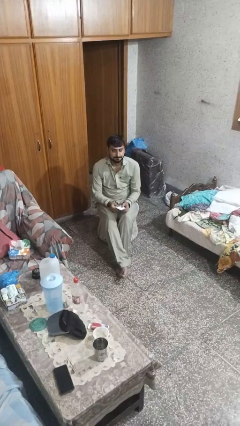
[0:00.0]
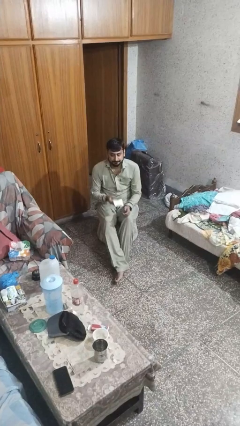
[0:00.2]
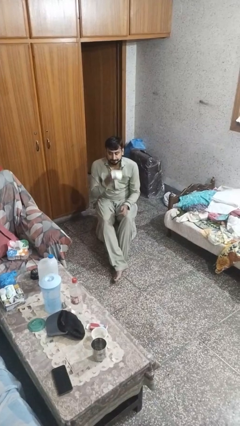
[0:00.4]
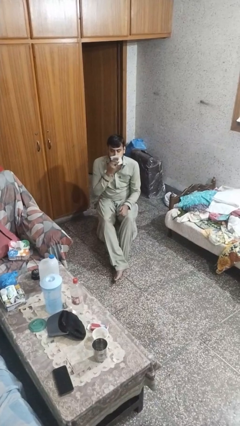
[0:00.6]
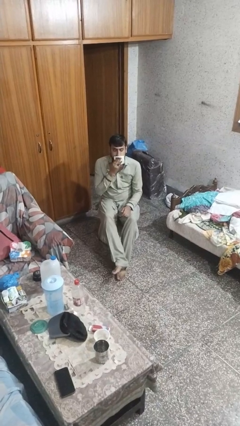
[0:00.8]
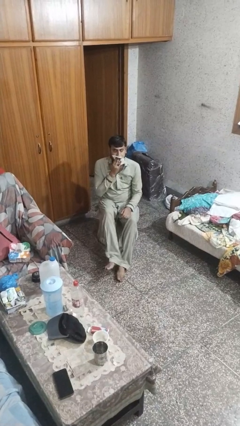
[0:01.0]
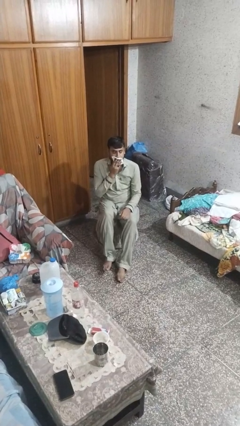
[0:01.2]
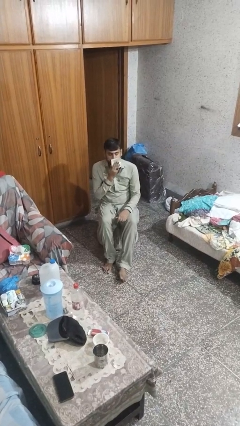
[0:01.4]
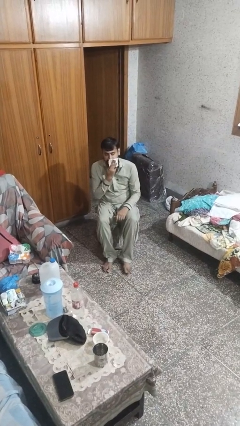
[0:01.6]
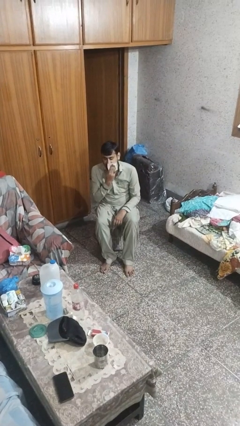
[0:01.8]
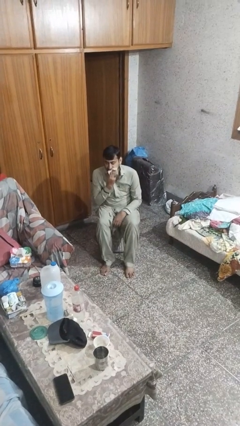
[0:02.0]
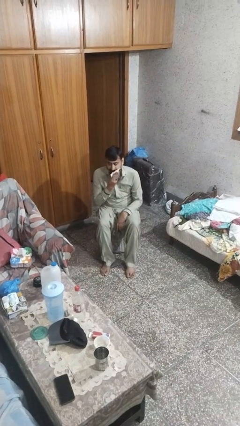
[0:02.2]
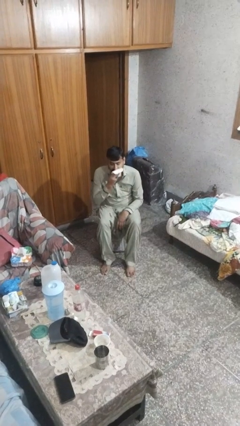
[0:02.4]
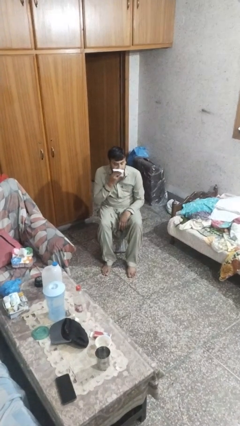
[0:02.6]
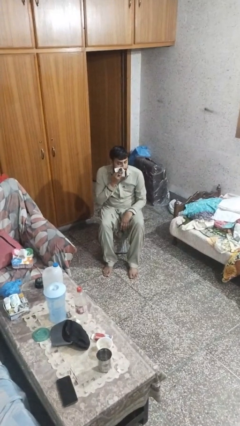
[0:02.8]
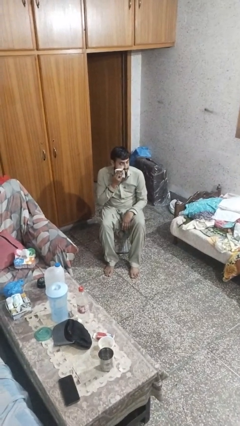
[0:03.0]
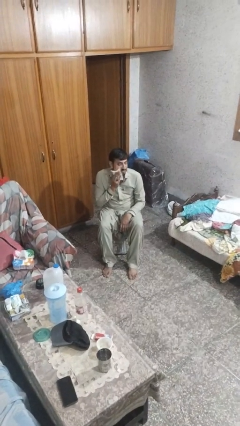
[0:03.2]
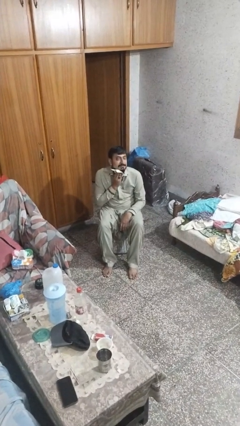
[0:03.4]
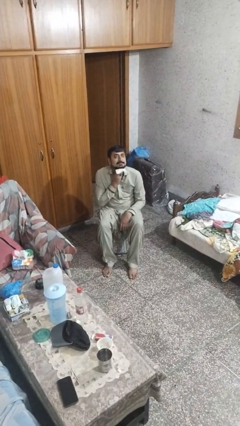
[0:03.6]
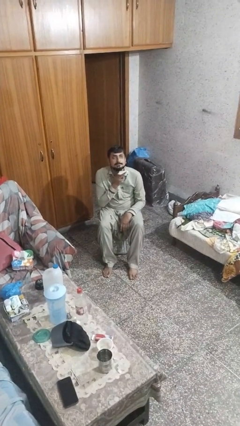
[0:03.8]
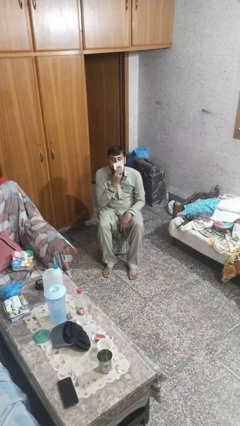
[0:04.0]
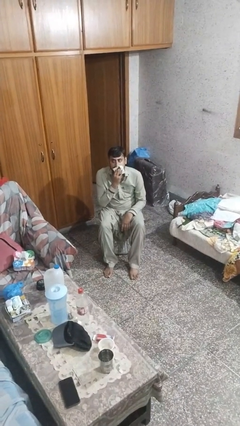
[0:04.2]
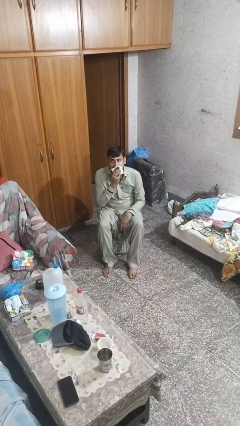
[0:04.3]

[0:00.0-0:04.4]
person wipes mouth with napkin

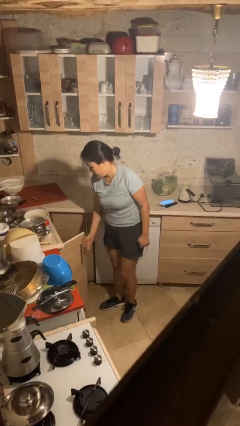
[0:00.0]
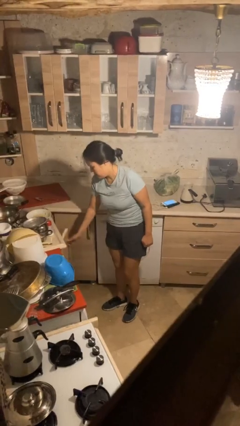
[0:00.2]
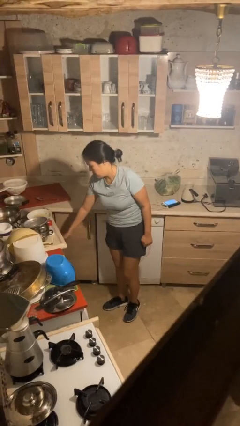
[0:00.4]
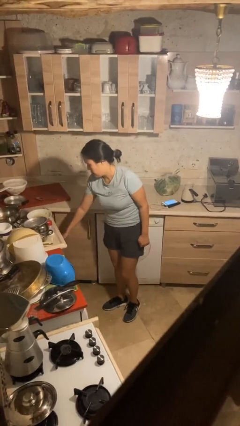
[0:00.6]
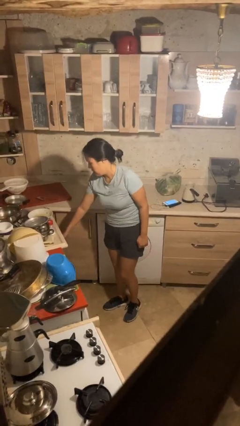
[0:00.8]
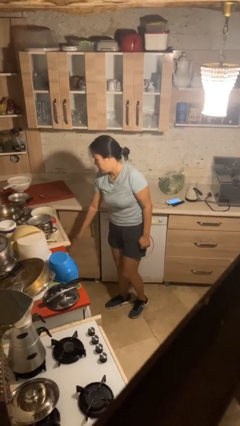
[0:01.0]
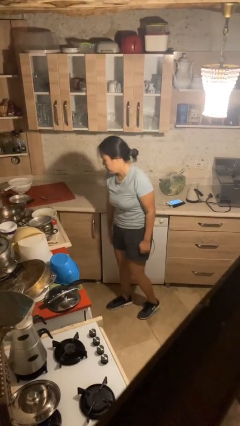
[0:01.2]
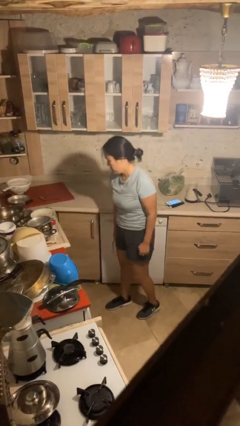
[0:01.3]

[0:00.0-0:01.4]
person closes cabinet

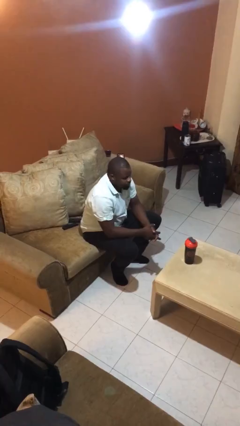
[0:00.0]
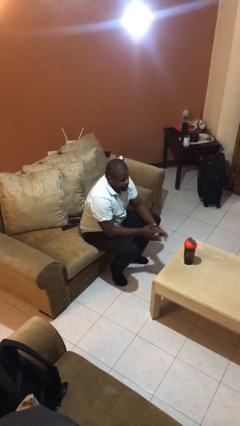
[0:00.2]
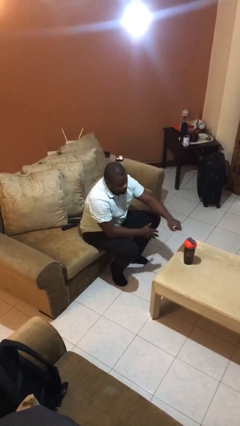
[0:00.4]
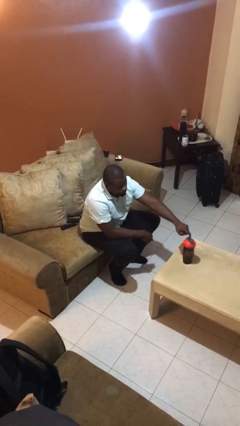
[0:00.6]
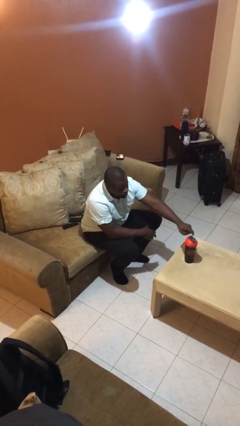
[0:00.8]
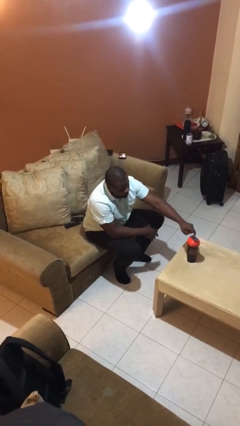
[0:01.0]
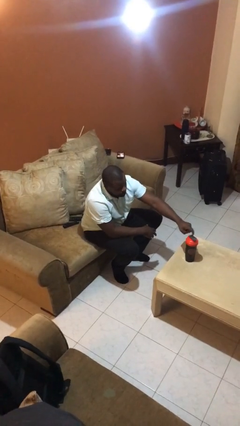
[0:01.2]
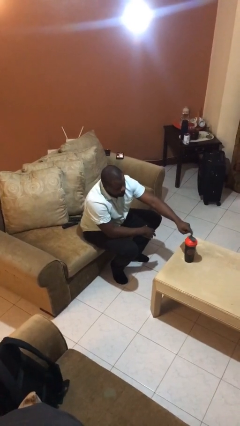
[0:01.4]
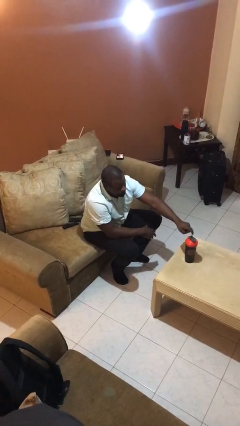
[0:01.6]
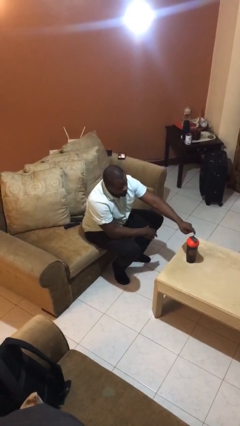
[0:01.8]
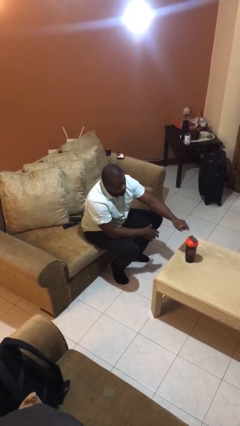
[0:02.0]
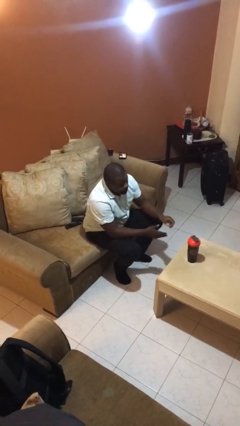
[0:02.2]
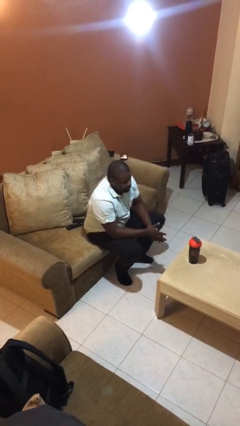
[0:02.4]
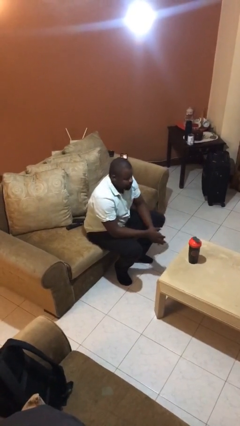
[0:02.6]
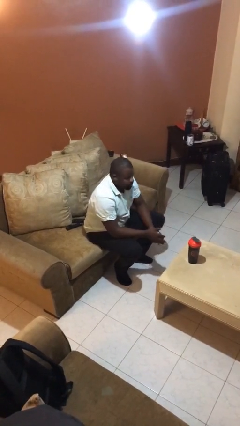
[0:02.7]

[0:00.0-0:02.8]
person taps object with finger

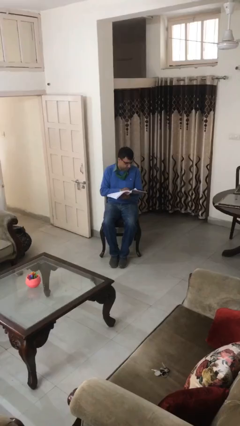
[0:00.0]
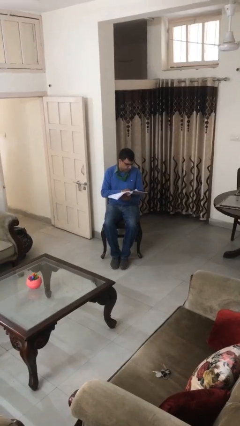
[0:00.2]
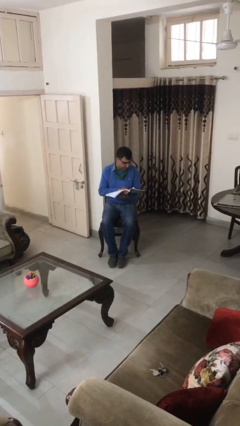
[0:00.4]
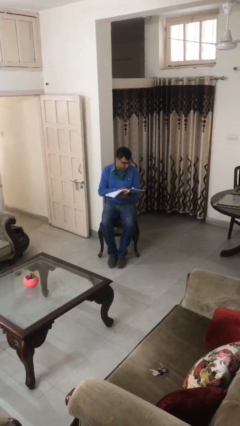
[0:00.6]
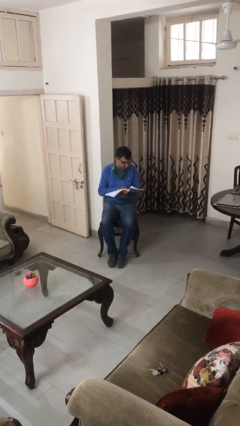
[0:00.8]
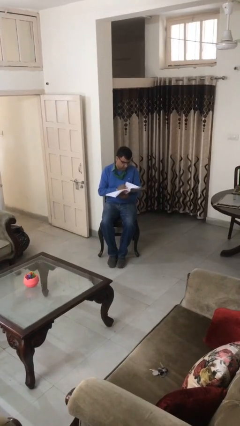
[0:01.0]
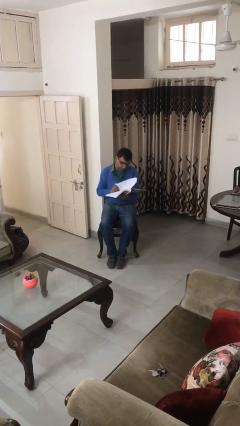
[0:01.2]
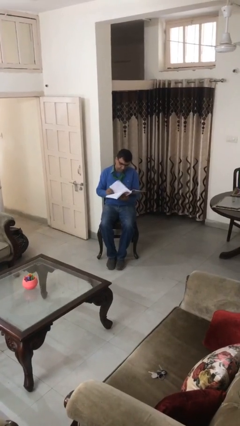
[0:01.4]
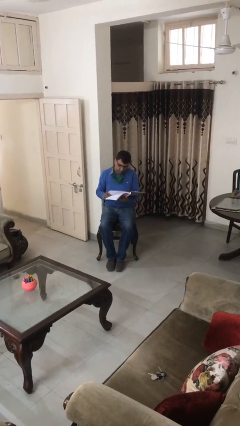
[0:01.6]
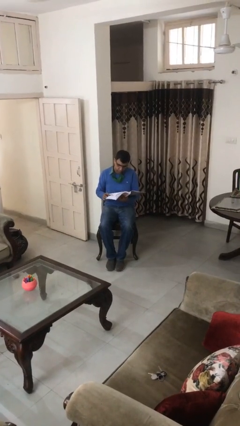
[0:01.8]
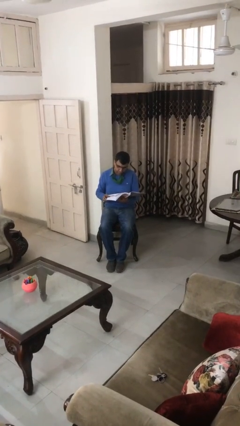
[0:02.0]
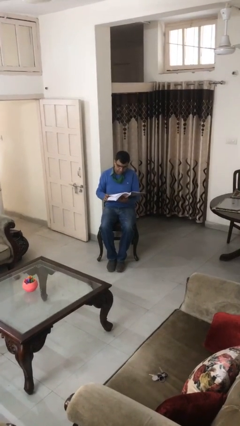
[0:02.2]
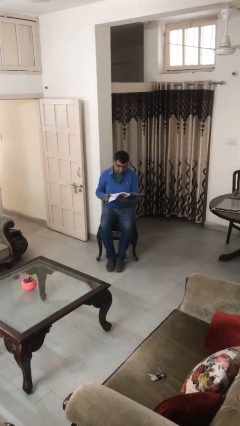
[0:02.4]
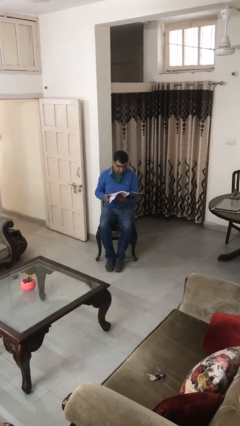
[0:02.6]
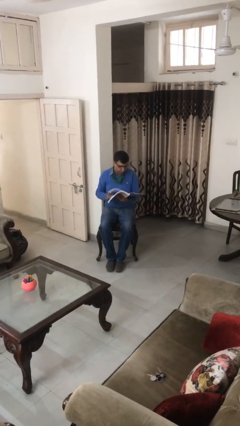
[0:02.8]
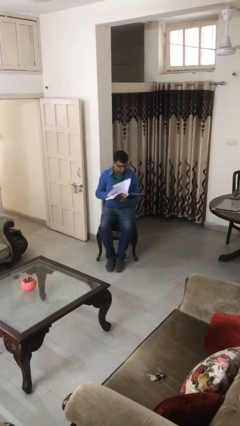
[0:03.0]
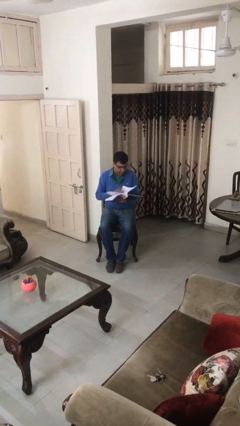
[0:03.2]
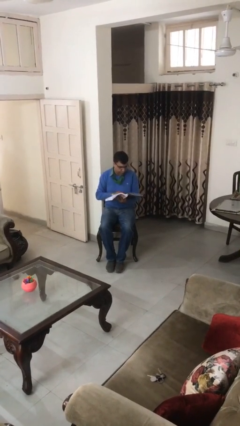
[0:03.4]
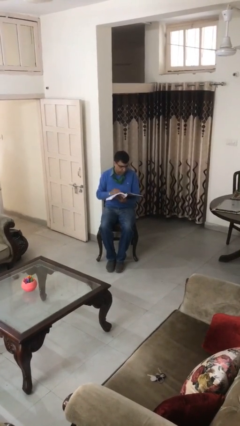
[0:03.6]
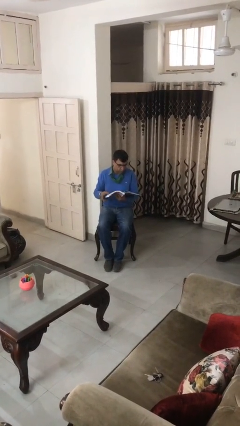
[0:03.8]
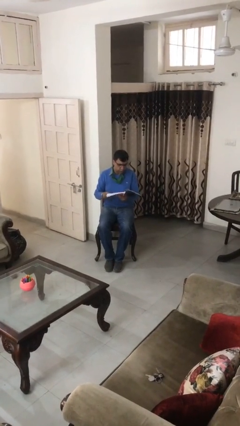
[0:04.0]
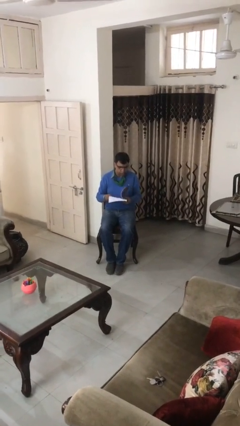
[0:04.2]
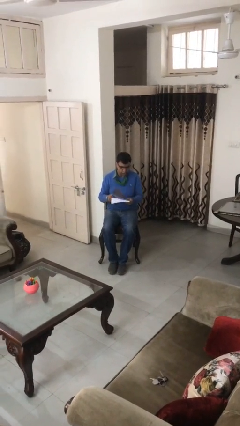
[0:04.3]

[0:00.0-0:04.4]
person reads document

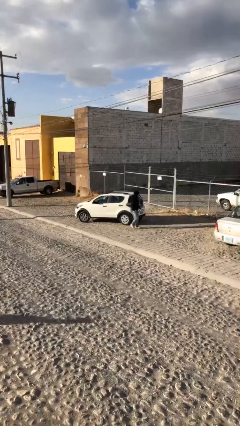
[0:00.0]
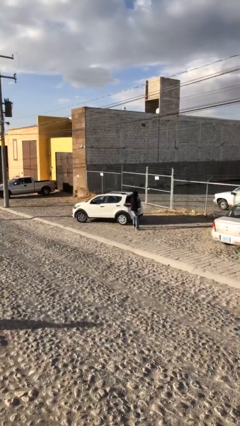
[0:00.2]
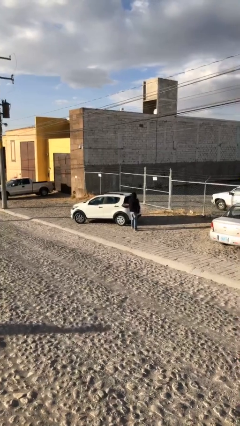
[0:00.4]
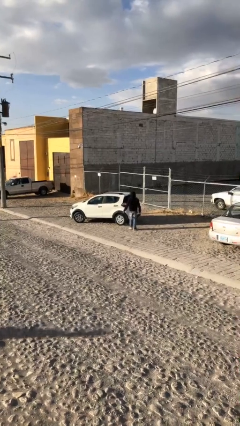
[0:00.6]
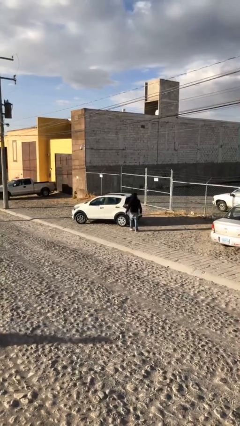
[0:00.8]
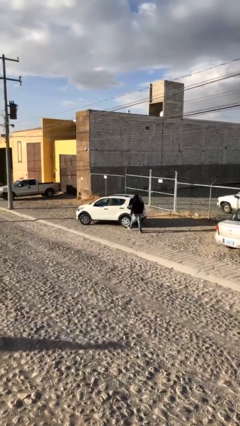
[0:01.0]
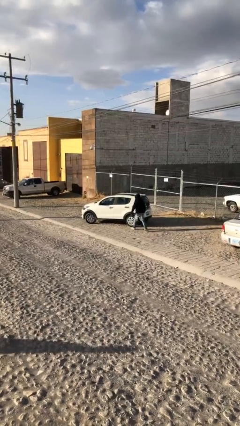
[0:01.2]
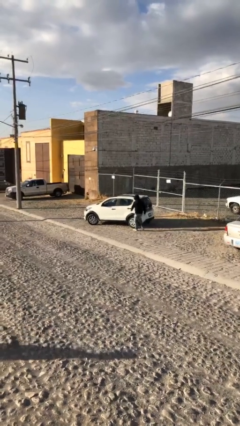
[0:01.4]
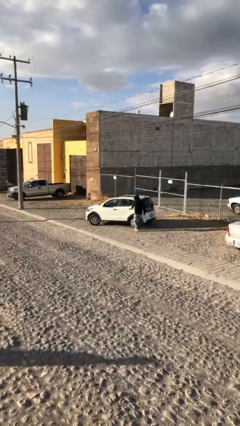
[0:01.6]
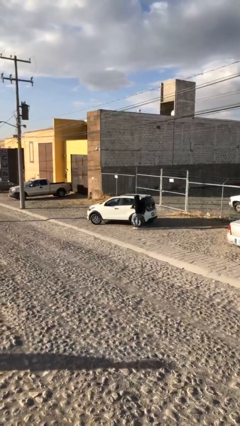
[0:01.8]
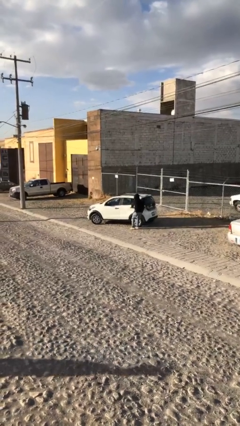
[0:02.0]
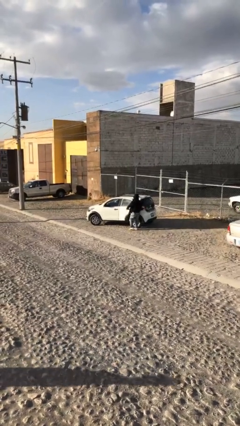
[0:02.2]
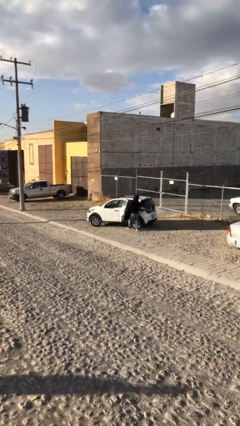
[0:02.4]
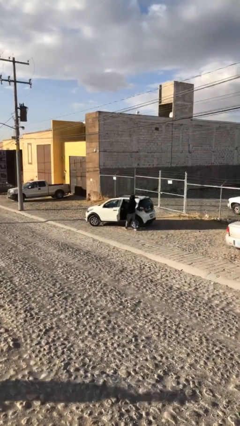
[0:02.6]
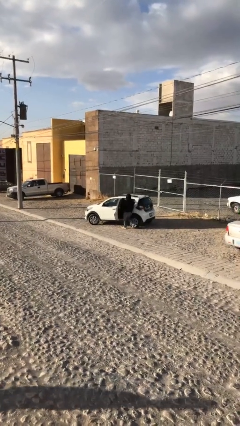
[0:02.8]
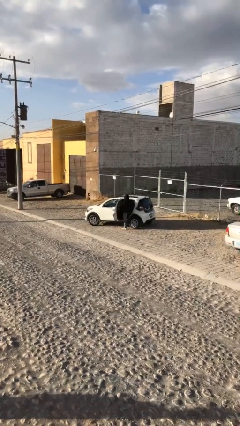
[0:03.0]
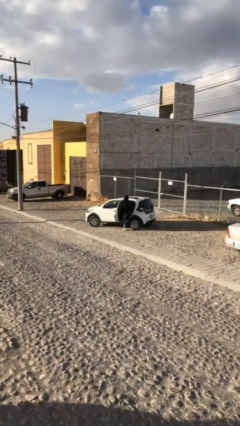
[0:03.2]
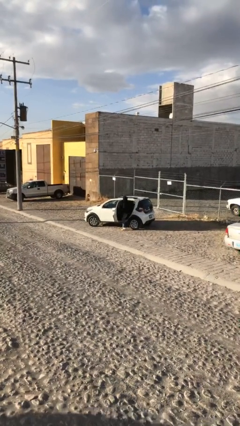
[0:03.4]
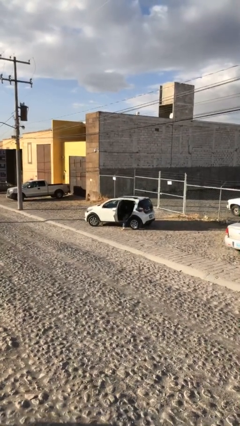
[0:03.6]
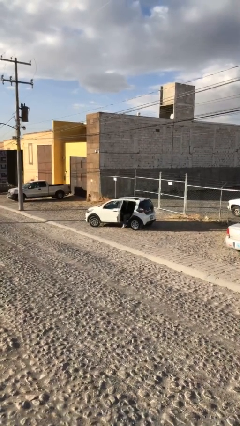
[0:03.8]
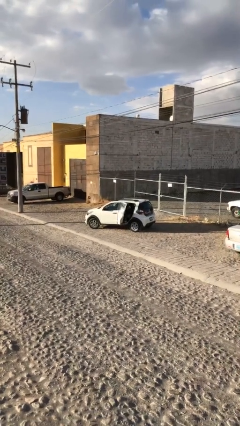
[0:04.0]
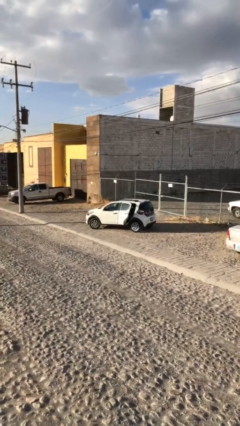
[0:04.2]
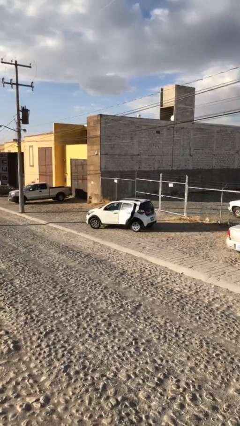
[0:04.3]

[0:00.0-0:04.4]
car picks up person

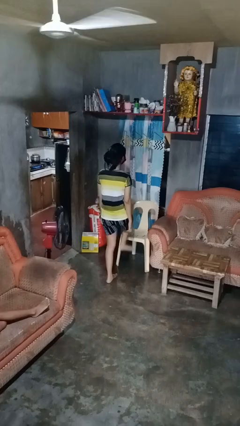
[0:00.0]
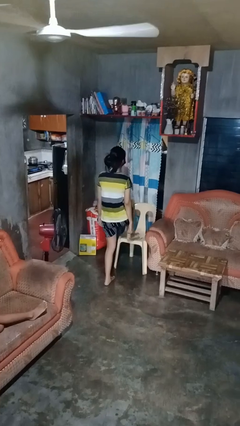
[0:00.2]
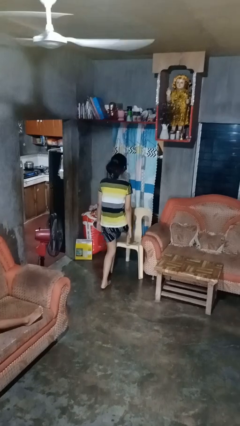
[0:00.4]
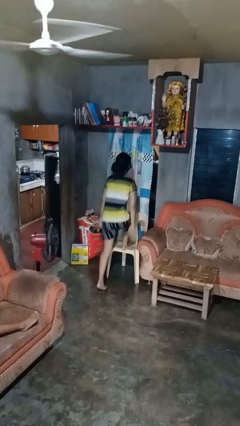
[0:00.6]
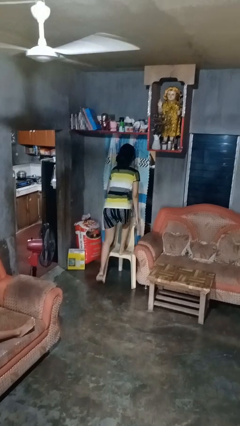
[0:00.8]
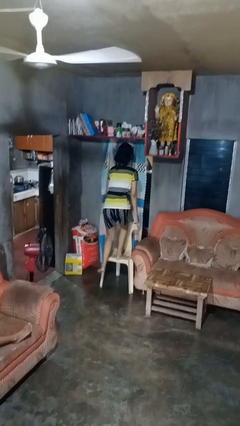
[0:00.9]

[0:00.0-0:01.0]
person climbs on chair
